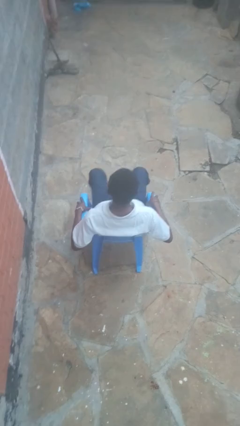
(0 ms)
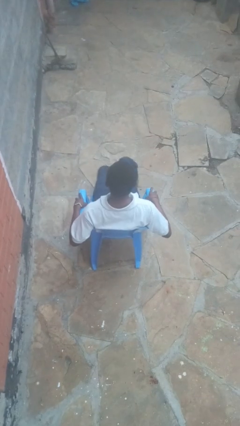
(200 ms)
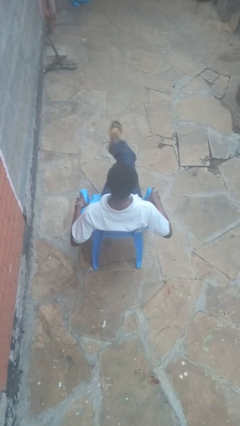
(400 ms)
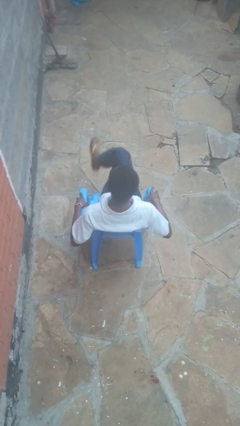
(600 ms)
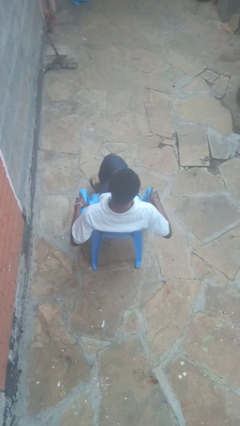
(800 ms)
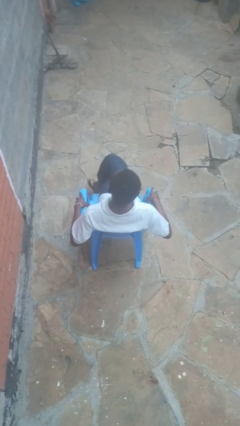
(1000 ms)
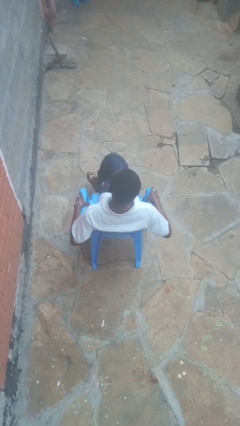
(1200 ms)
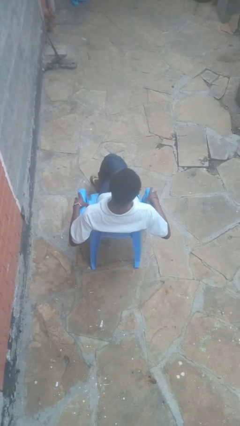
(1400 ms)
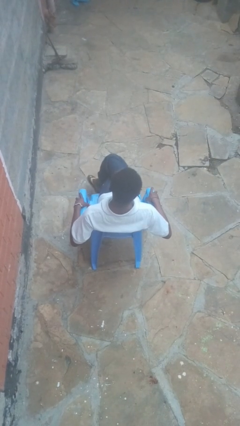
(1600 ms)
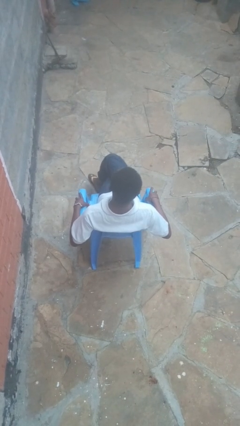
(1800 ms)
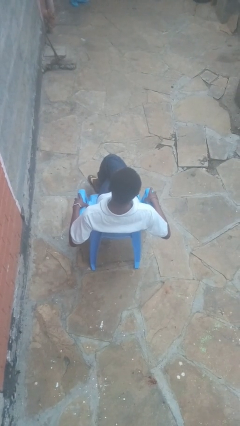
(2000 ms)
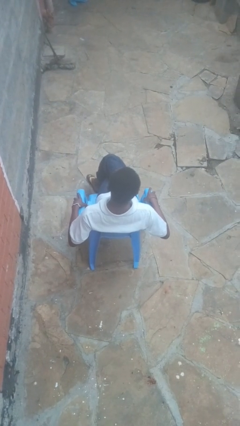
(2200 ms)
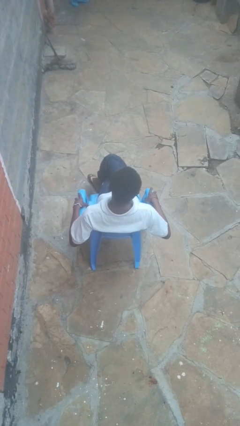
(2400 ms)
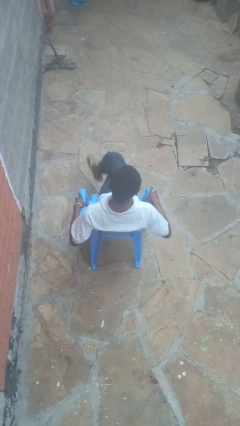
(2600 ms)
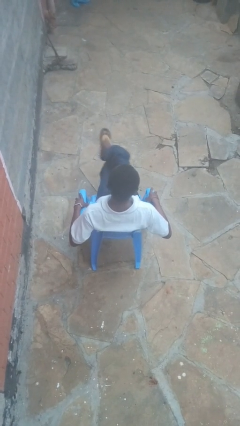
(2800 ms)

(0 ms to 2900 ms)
person crosses legs

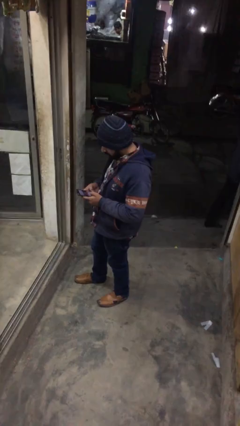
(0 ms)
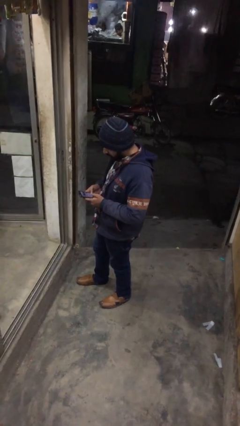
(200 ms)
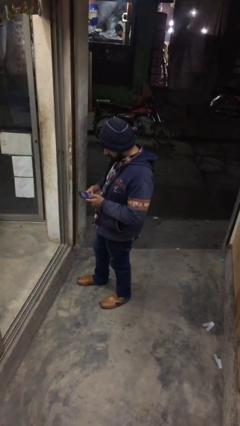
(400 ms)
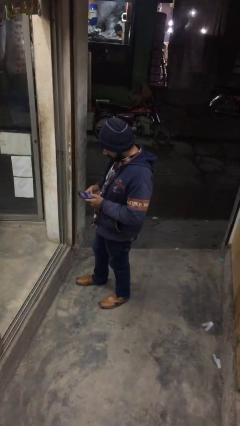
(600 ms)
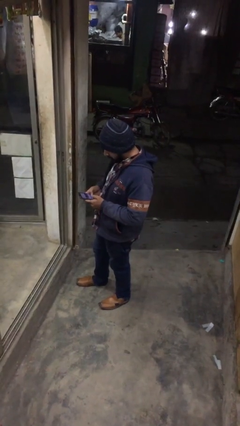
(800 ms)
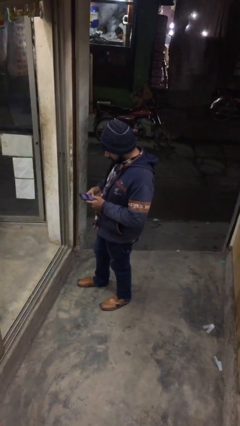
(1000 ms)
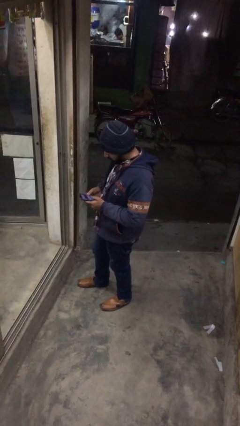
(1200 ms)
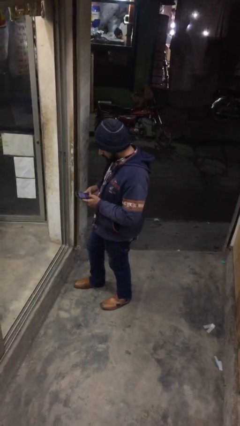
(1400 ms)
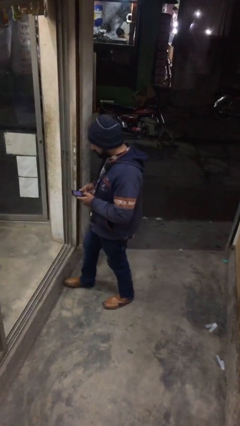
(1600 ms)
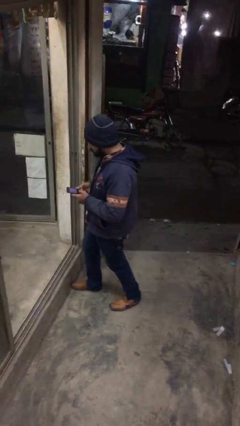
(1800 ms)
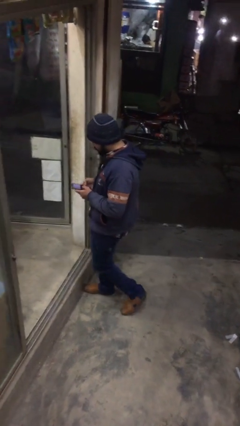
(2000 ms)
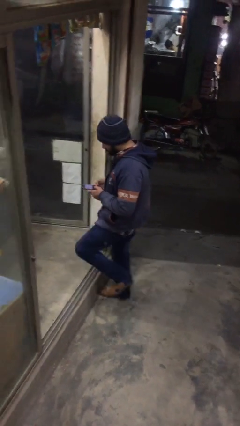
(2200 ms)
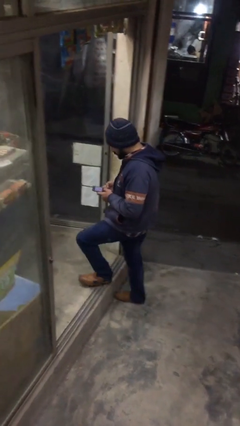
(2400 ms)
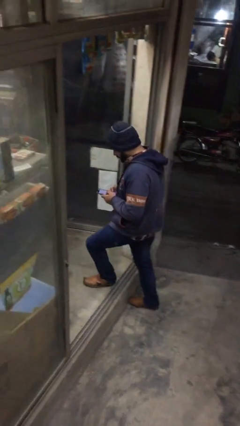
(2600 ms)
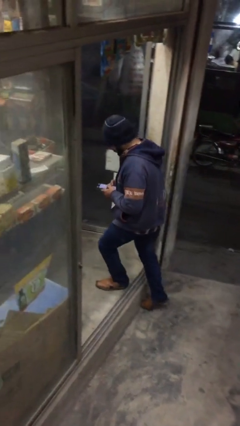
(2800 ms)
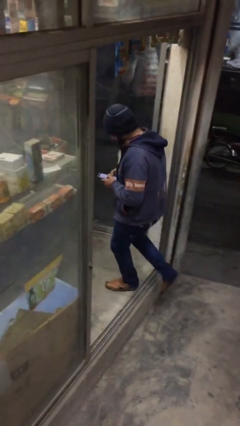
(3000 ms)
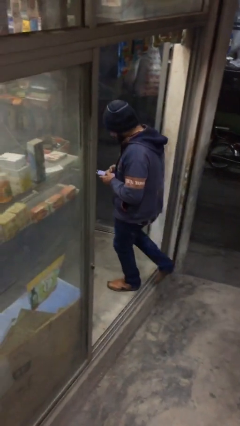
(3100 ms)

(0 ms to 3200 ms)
person enters scene through structure

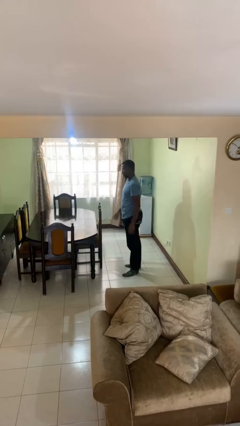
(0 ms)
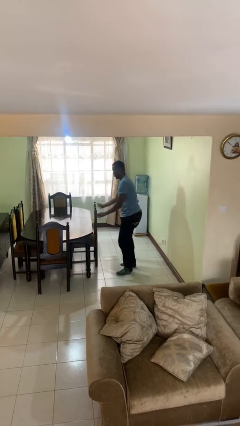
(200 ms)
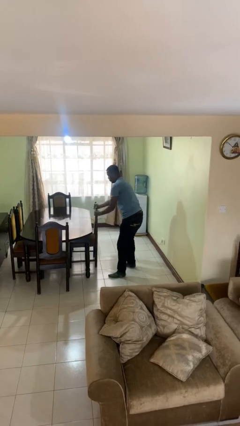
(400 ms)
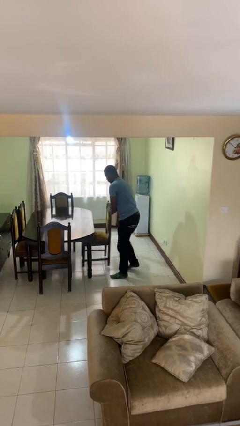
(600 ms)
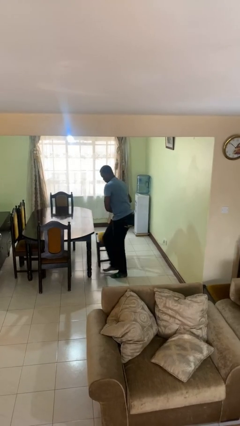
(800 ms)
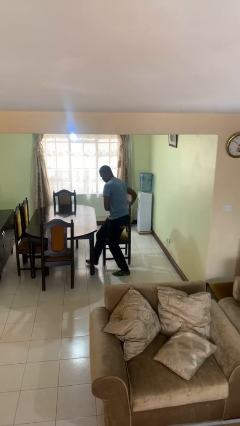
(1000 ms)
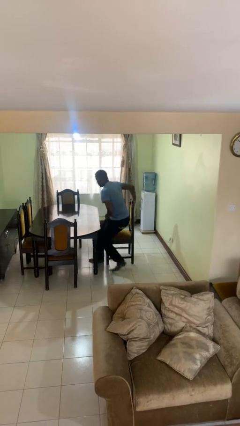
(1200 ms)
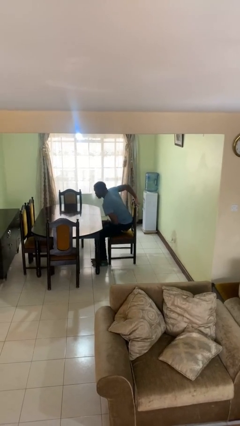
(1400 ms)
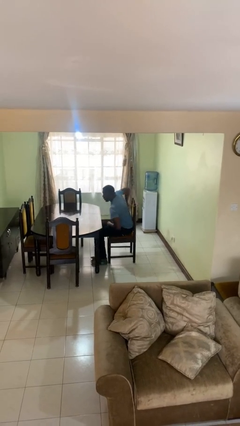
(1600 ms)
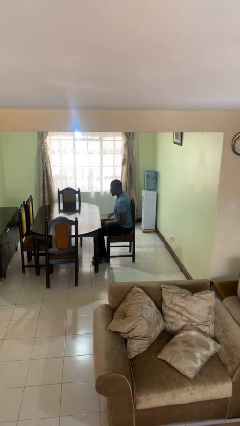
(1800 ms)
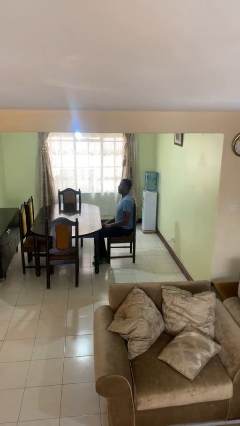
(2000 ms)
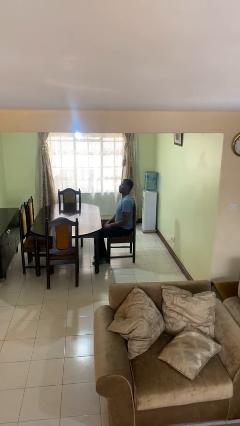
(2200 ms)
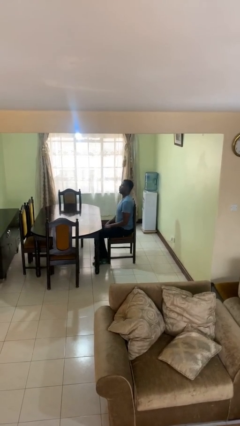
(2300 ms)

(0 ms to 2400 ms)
person sits down

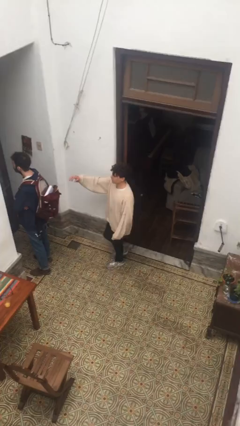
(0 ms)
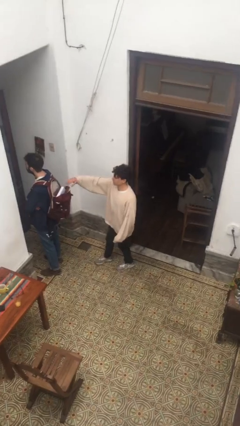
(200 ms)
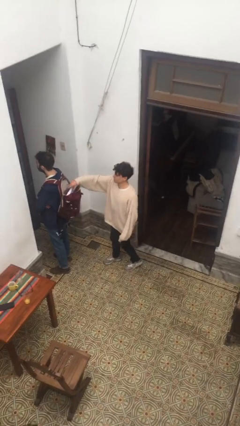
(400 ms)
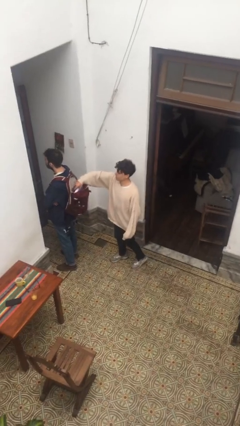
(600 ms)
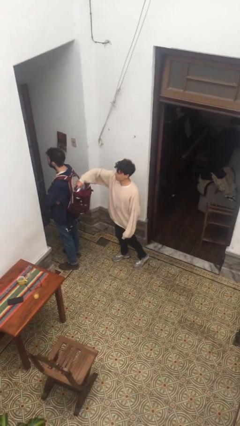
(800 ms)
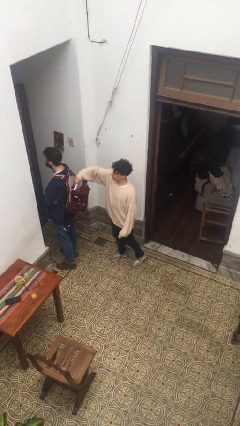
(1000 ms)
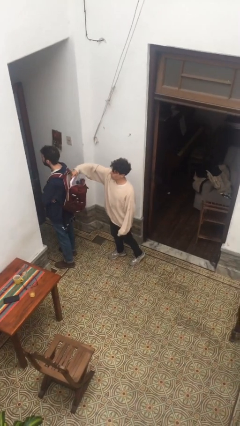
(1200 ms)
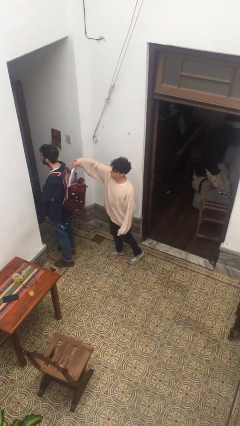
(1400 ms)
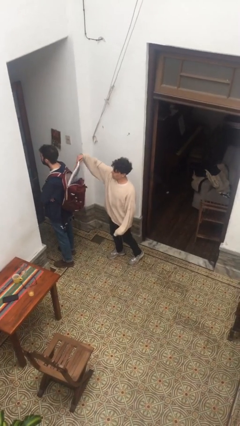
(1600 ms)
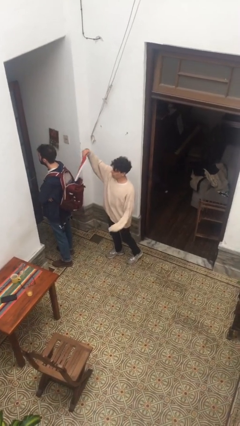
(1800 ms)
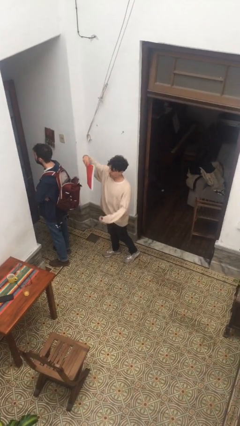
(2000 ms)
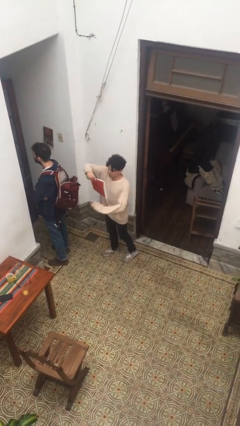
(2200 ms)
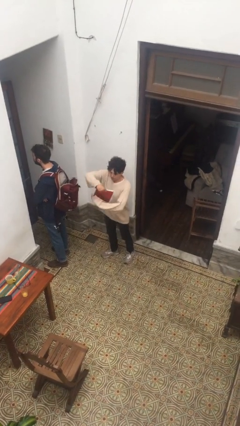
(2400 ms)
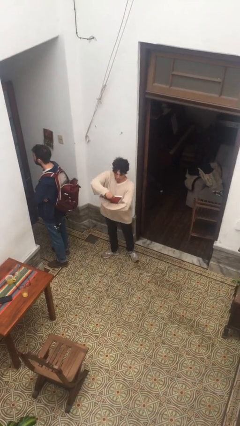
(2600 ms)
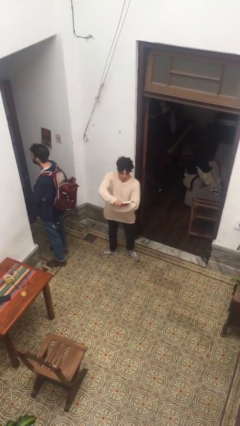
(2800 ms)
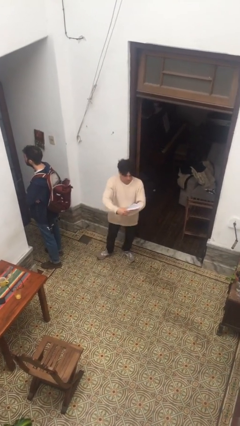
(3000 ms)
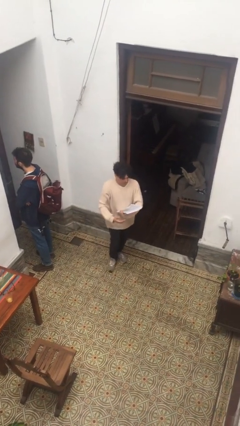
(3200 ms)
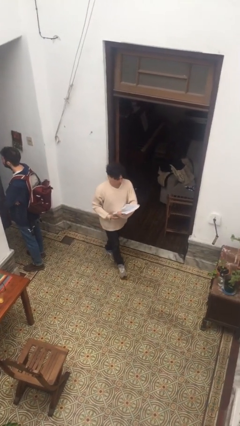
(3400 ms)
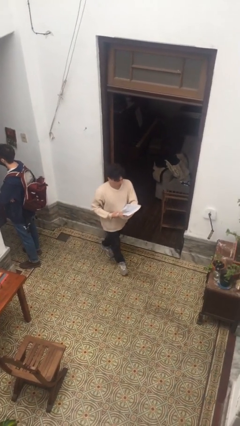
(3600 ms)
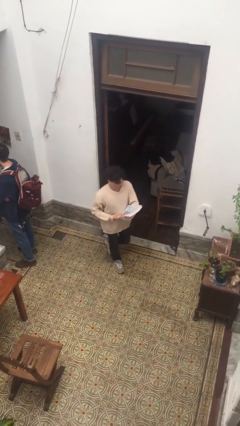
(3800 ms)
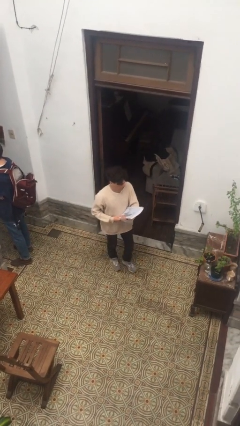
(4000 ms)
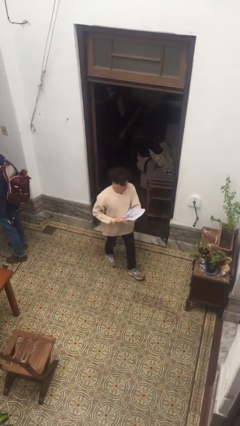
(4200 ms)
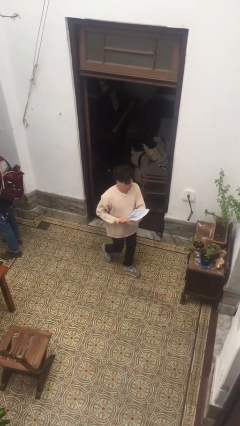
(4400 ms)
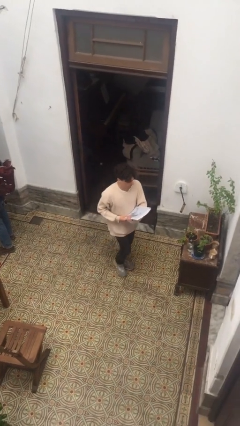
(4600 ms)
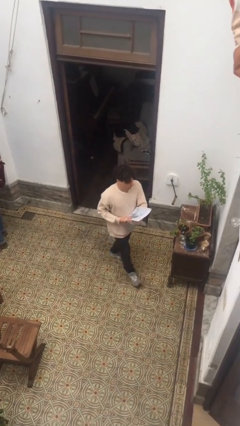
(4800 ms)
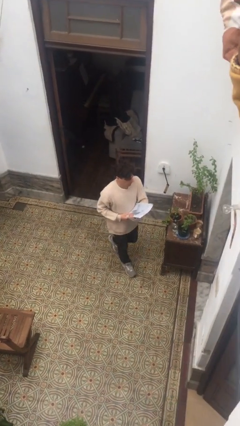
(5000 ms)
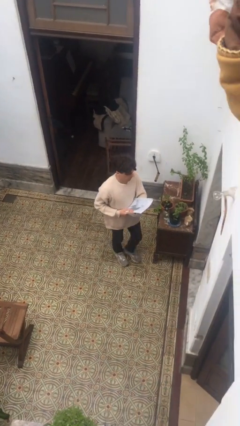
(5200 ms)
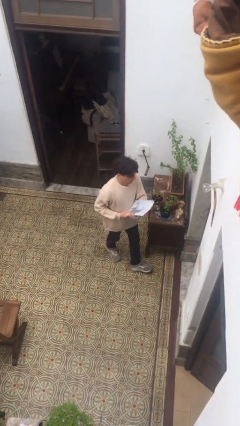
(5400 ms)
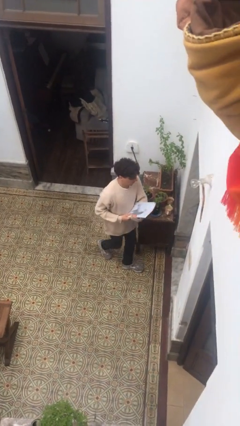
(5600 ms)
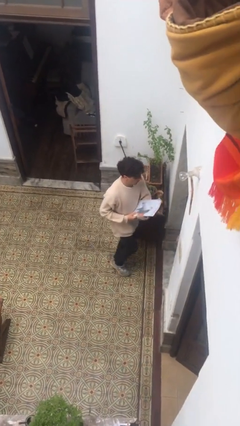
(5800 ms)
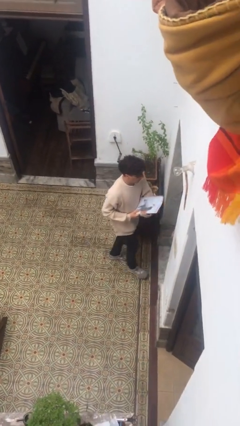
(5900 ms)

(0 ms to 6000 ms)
person steals object from person

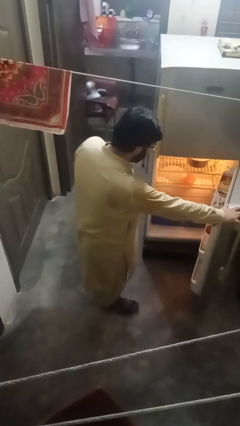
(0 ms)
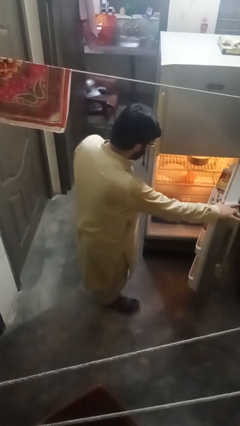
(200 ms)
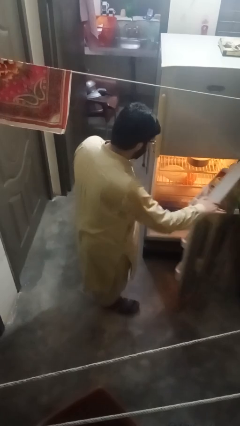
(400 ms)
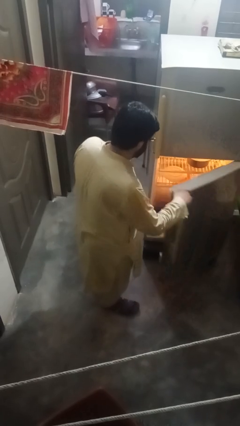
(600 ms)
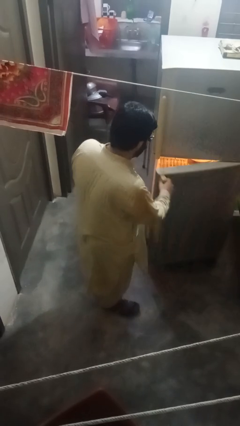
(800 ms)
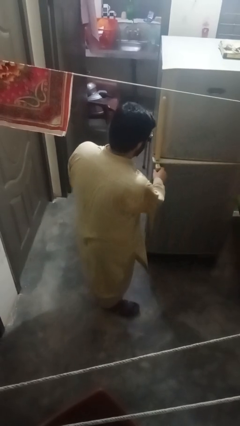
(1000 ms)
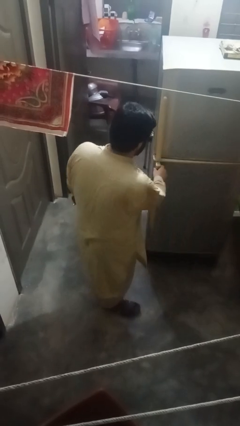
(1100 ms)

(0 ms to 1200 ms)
person closes refrigerator

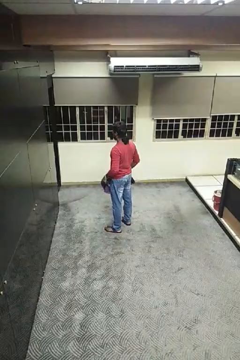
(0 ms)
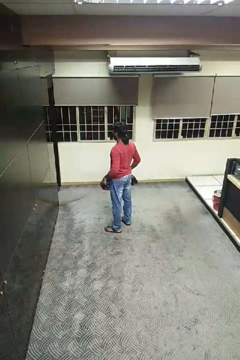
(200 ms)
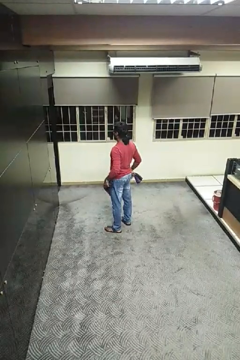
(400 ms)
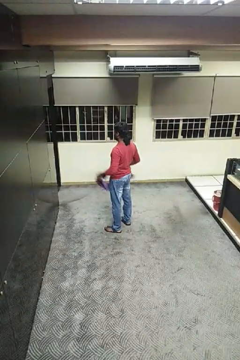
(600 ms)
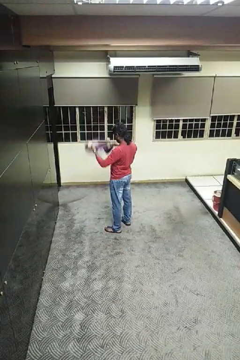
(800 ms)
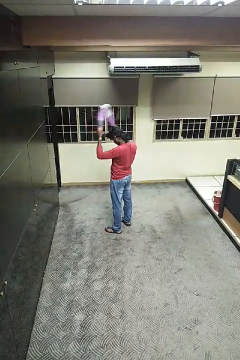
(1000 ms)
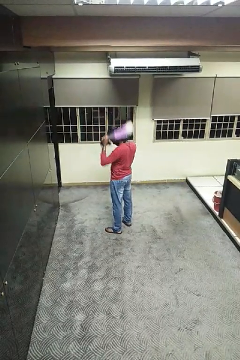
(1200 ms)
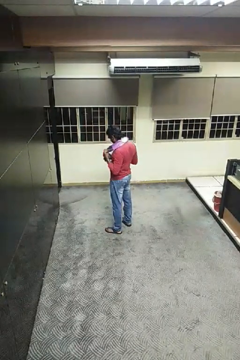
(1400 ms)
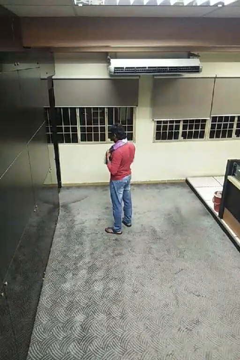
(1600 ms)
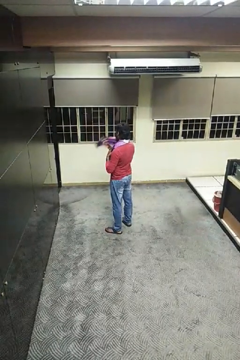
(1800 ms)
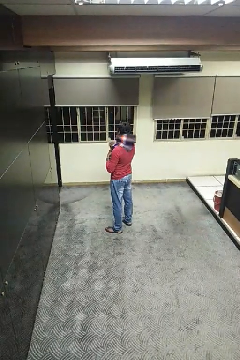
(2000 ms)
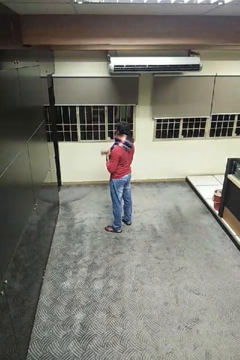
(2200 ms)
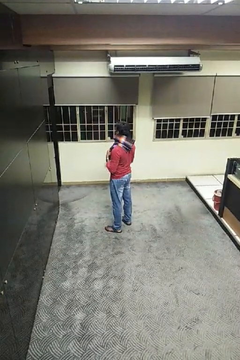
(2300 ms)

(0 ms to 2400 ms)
person puts on scarf
